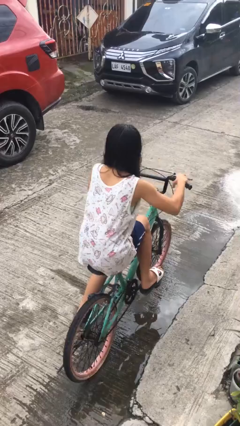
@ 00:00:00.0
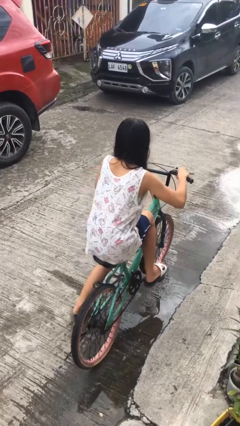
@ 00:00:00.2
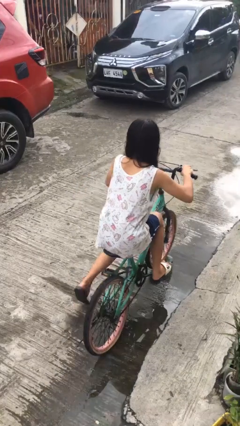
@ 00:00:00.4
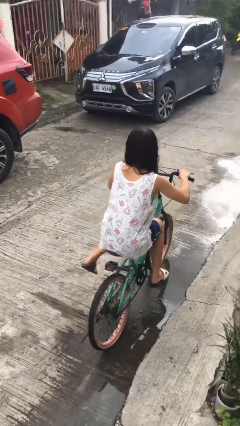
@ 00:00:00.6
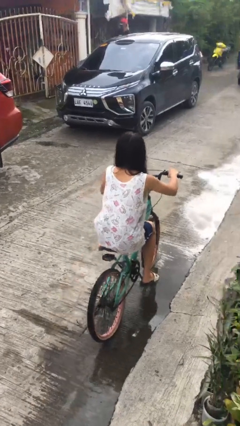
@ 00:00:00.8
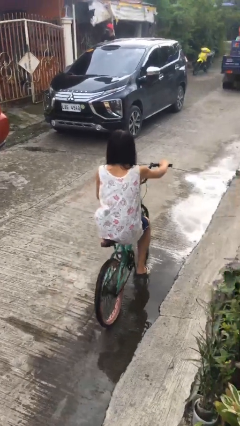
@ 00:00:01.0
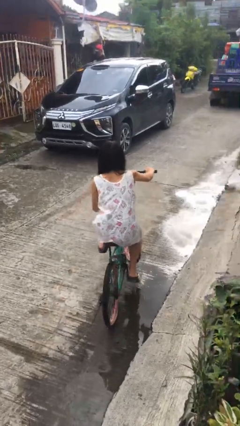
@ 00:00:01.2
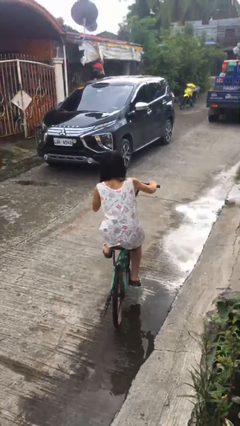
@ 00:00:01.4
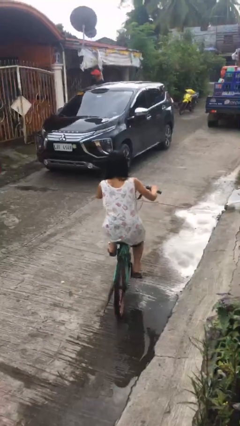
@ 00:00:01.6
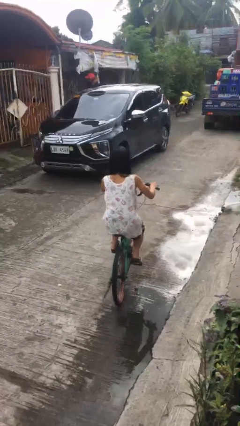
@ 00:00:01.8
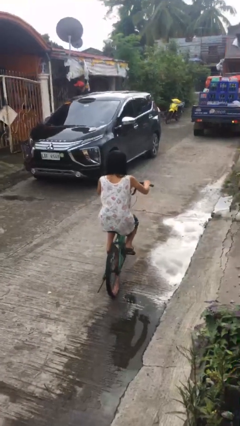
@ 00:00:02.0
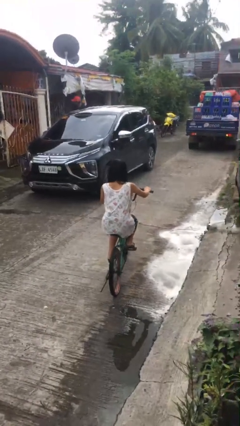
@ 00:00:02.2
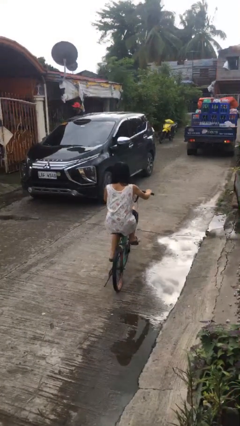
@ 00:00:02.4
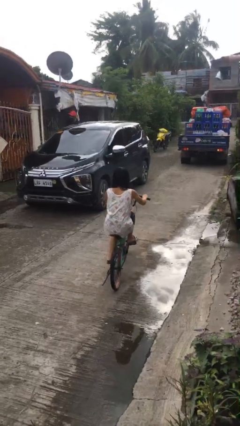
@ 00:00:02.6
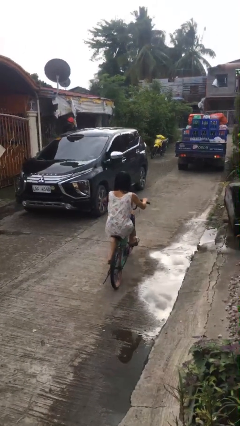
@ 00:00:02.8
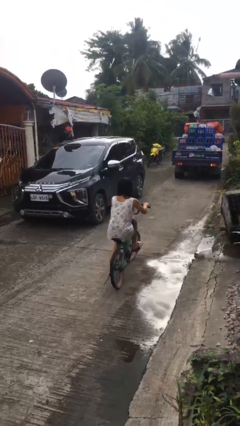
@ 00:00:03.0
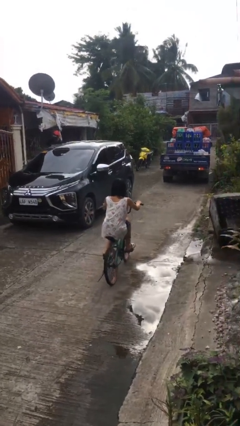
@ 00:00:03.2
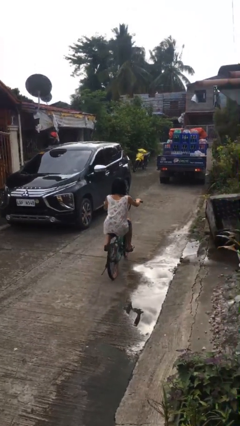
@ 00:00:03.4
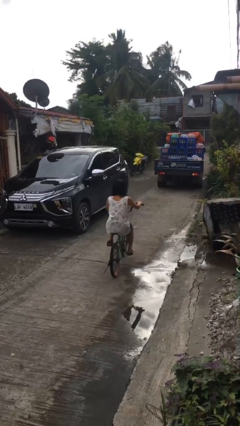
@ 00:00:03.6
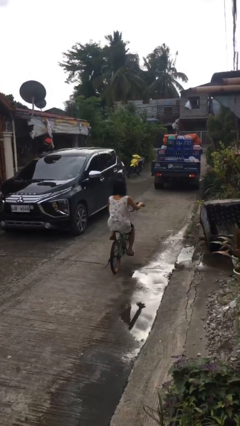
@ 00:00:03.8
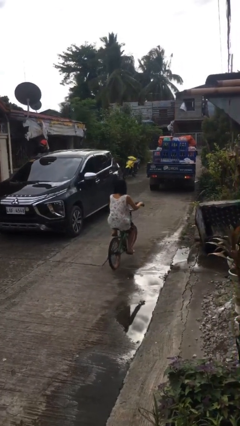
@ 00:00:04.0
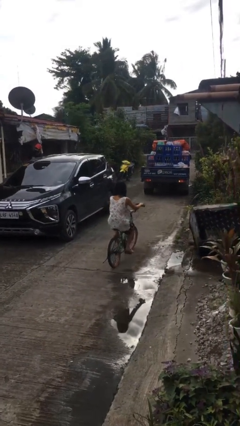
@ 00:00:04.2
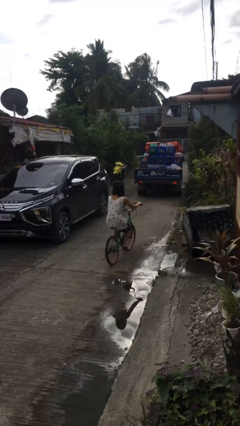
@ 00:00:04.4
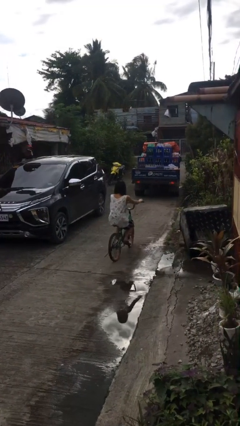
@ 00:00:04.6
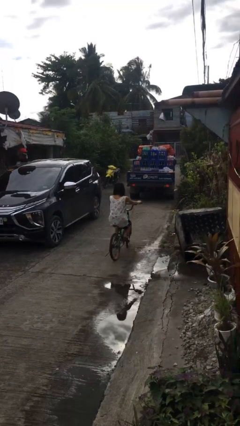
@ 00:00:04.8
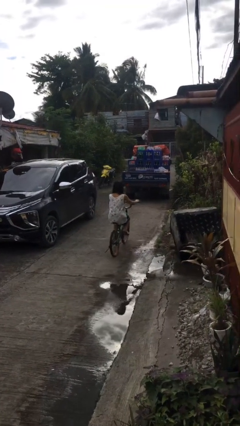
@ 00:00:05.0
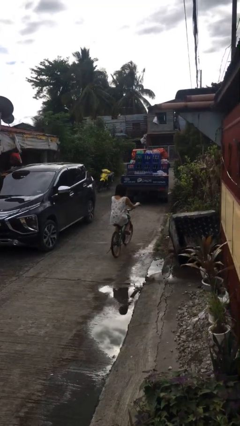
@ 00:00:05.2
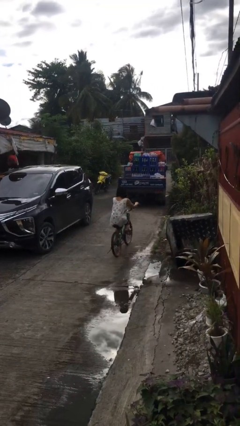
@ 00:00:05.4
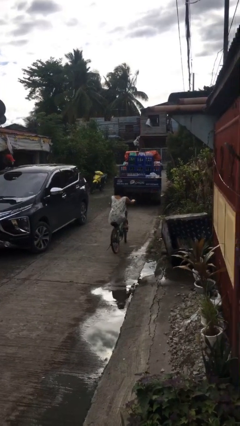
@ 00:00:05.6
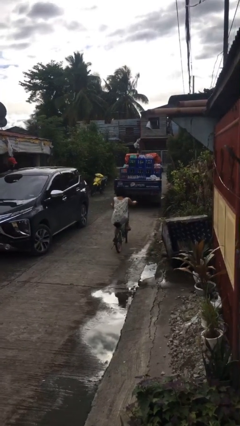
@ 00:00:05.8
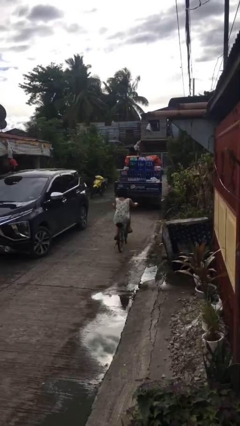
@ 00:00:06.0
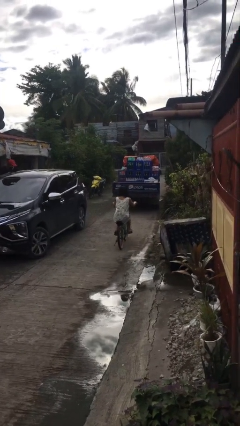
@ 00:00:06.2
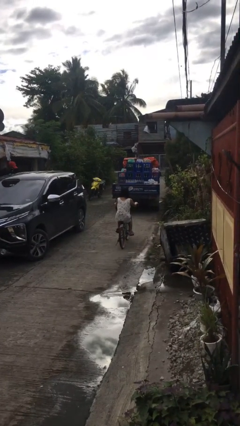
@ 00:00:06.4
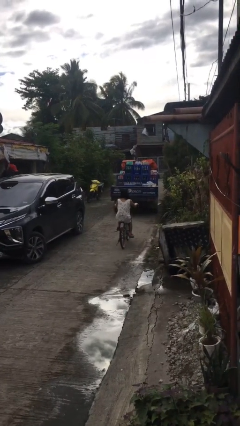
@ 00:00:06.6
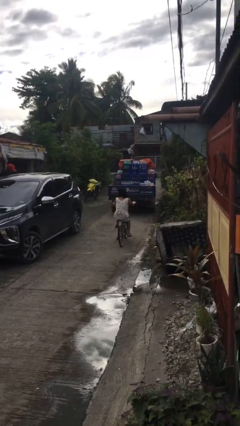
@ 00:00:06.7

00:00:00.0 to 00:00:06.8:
person rides bicycle

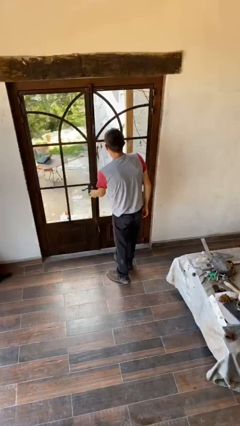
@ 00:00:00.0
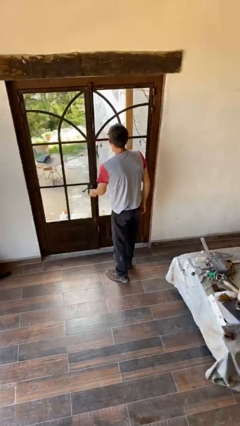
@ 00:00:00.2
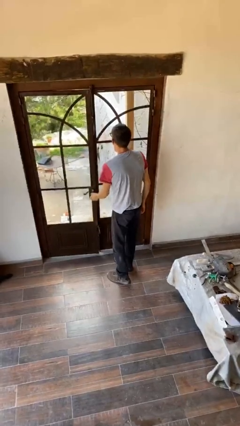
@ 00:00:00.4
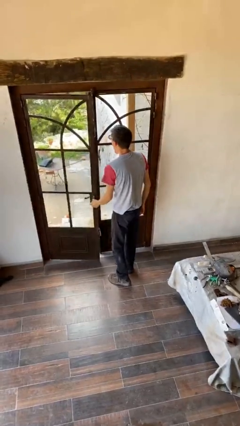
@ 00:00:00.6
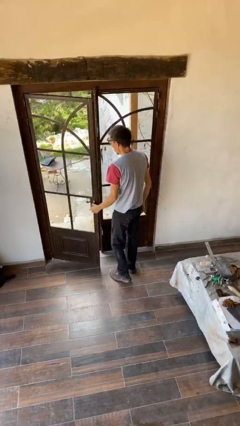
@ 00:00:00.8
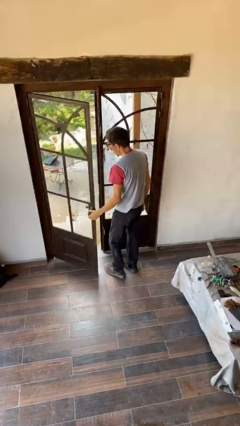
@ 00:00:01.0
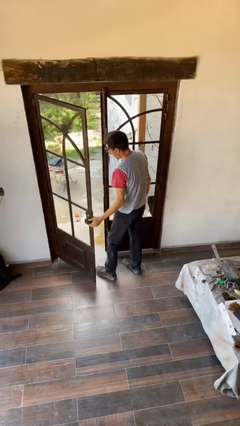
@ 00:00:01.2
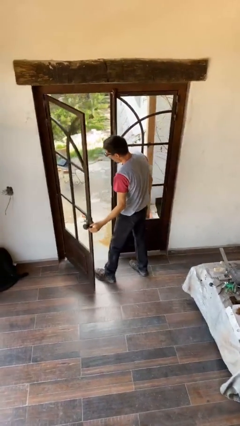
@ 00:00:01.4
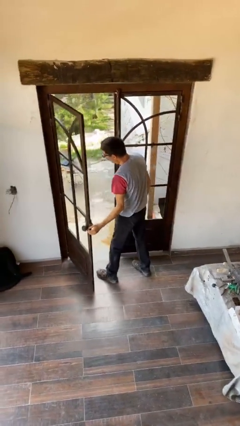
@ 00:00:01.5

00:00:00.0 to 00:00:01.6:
person opens facility door

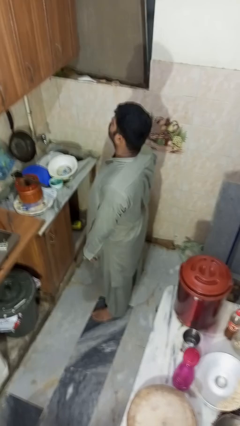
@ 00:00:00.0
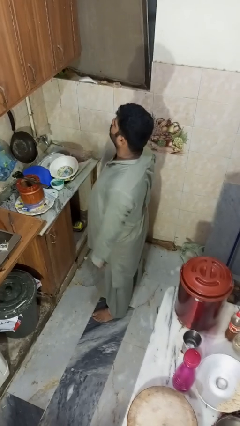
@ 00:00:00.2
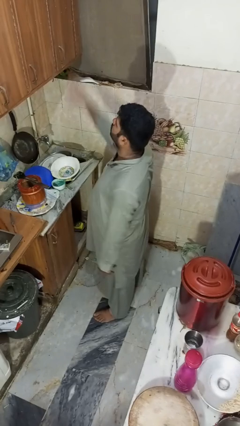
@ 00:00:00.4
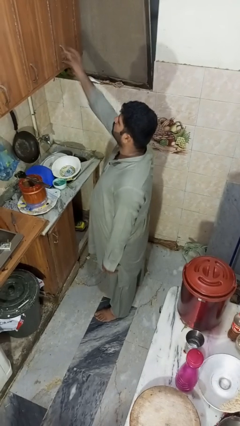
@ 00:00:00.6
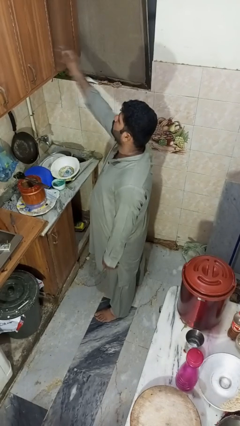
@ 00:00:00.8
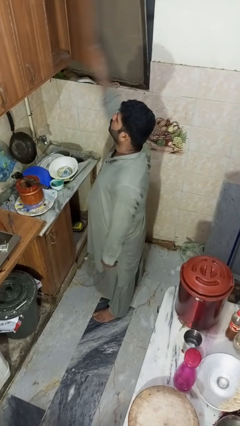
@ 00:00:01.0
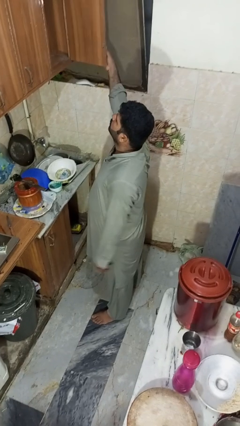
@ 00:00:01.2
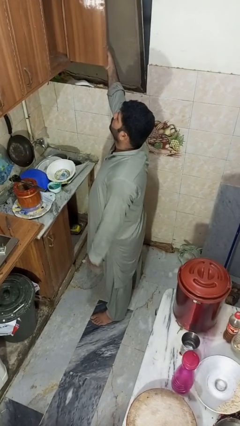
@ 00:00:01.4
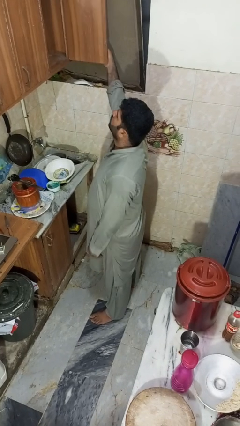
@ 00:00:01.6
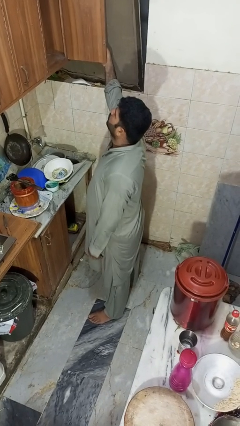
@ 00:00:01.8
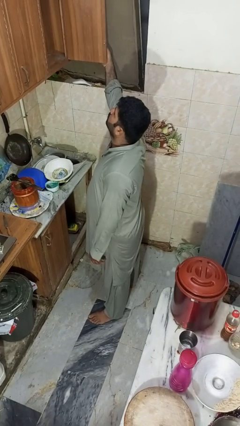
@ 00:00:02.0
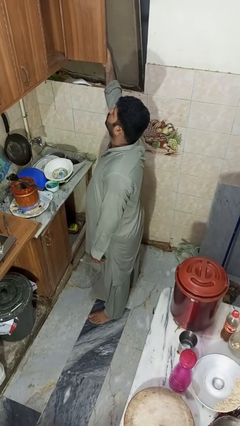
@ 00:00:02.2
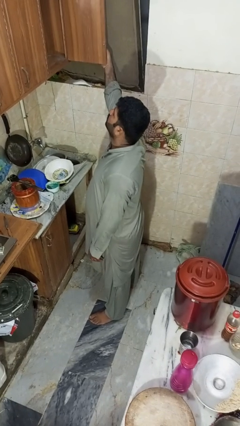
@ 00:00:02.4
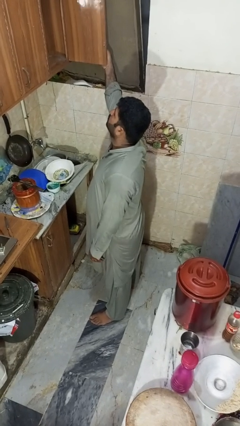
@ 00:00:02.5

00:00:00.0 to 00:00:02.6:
person opens cabinet

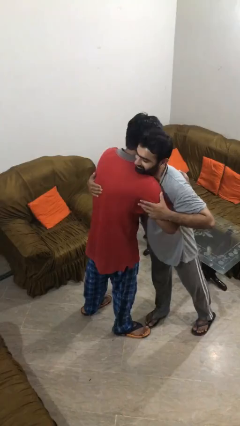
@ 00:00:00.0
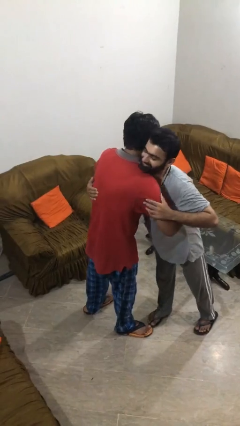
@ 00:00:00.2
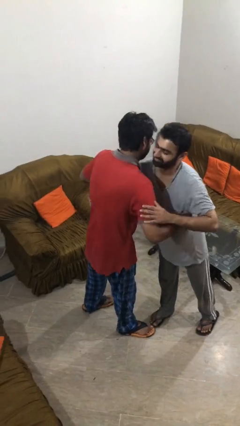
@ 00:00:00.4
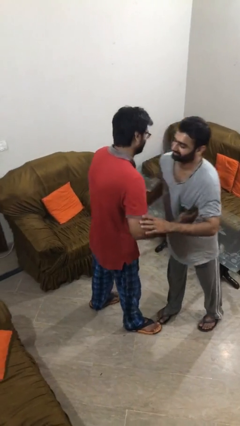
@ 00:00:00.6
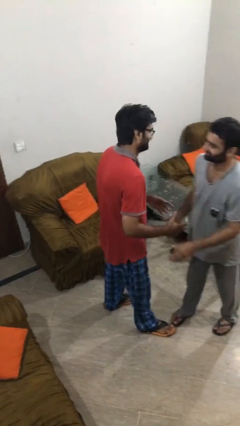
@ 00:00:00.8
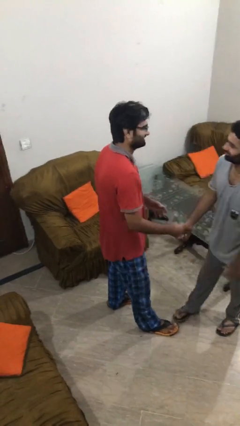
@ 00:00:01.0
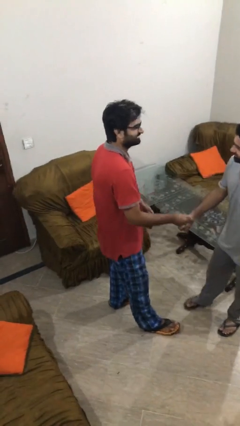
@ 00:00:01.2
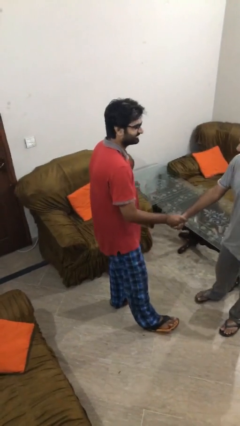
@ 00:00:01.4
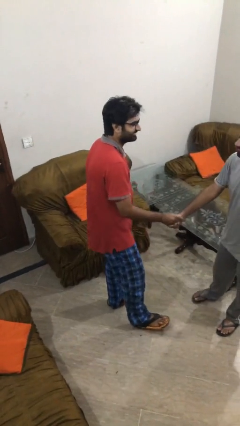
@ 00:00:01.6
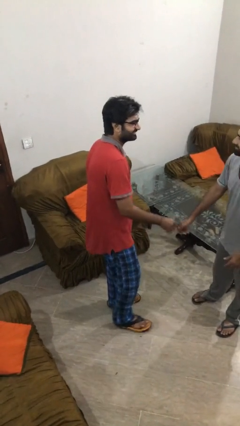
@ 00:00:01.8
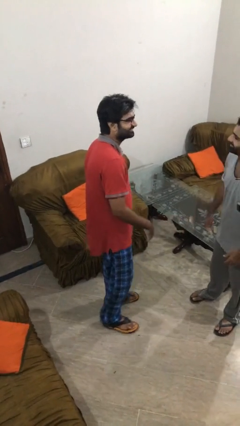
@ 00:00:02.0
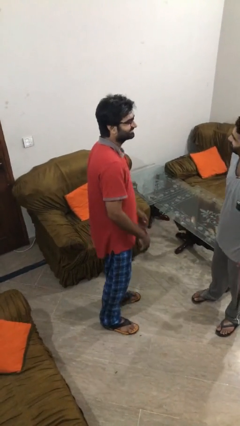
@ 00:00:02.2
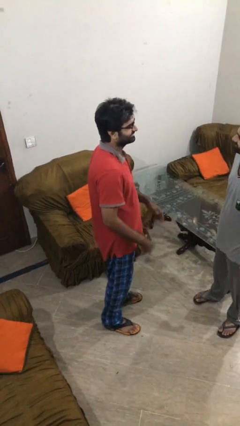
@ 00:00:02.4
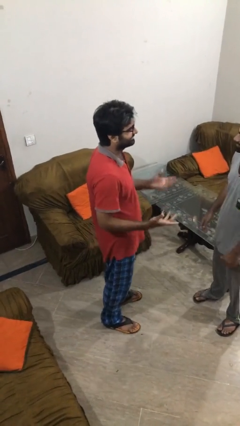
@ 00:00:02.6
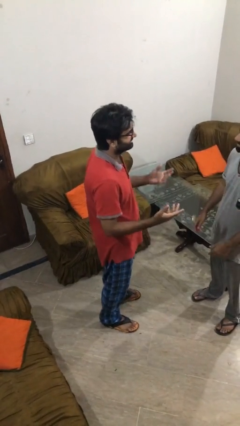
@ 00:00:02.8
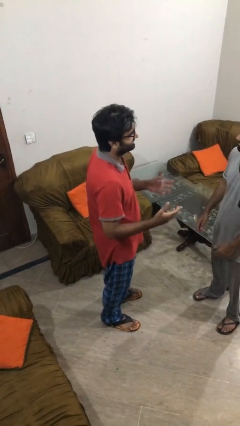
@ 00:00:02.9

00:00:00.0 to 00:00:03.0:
person talks to person

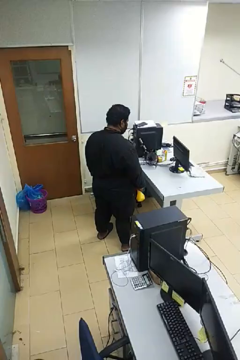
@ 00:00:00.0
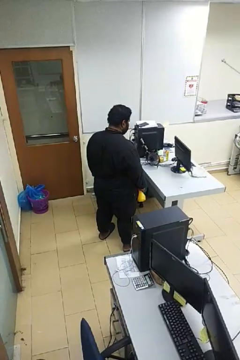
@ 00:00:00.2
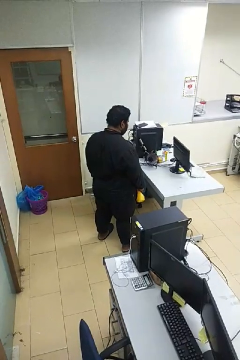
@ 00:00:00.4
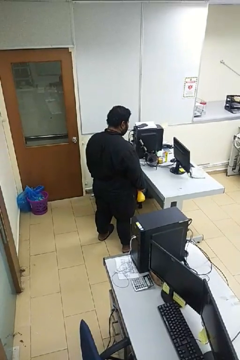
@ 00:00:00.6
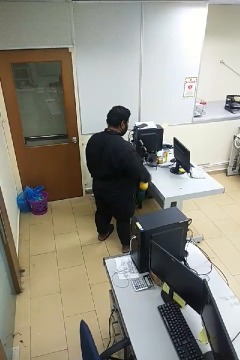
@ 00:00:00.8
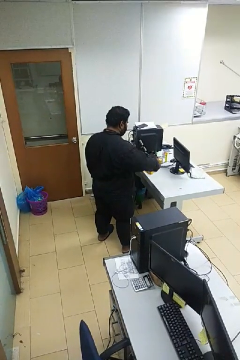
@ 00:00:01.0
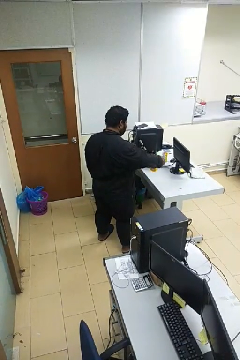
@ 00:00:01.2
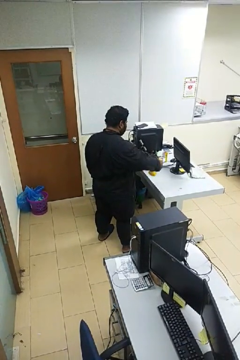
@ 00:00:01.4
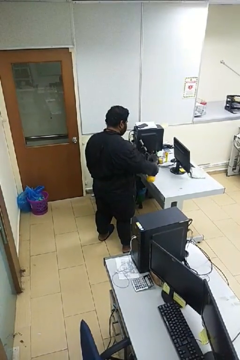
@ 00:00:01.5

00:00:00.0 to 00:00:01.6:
person sprays from bottle

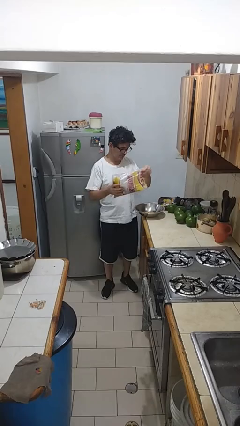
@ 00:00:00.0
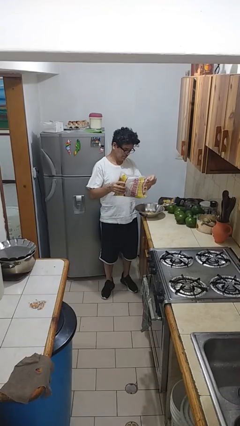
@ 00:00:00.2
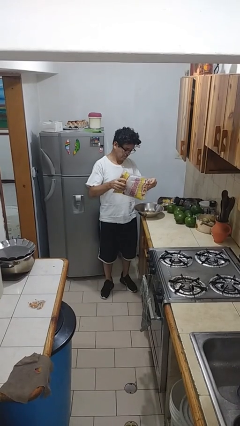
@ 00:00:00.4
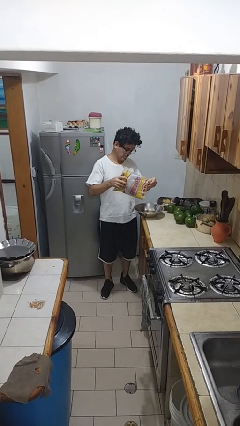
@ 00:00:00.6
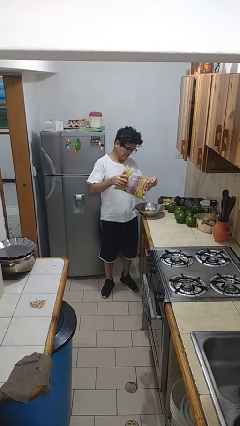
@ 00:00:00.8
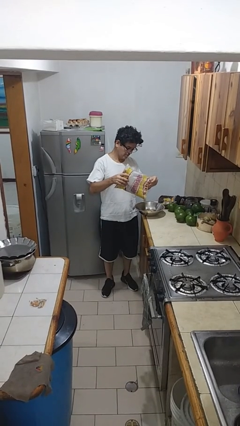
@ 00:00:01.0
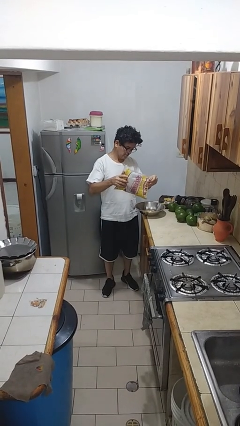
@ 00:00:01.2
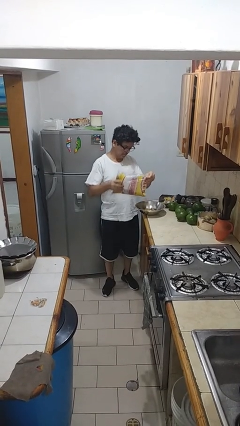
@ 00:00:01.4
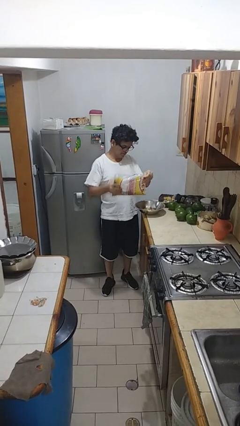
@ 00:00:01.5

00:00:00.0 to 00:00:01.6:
person pours into bowl
